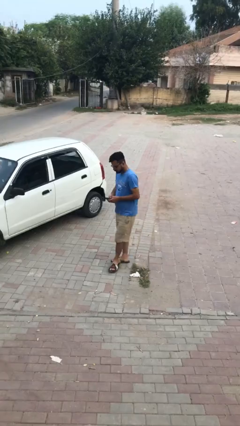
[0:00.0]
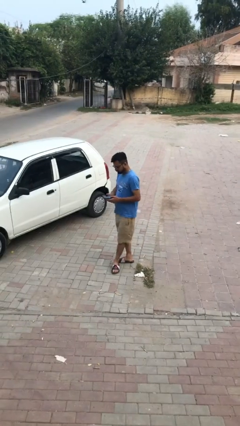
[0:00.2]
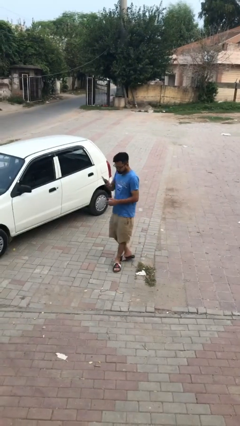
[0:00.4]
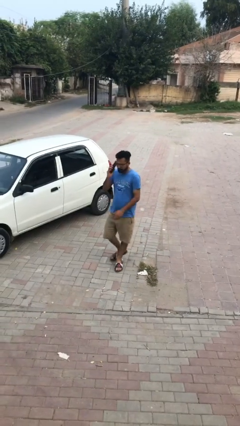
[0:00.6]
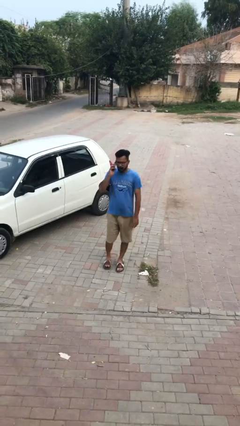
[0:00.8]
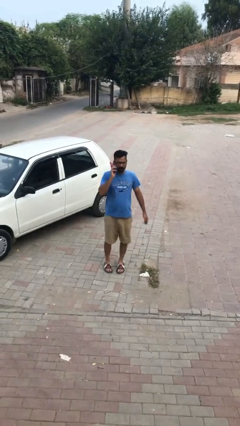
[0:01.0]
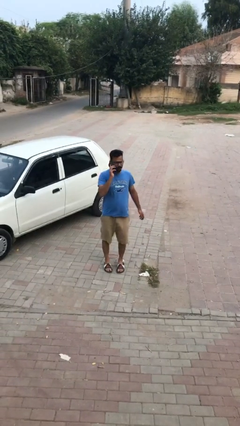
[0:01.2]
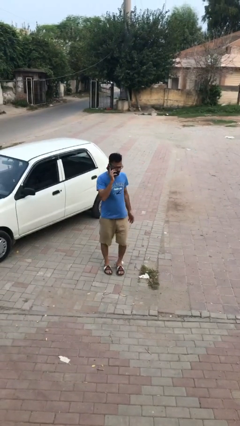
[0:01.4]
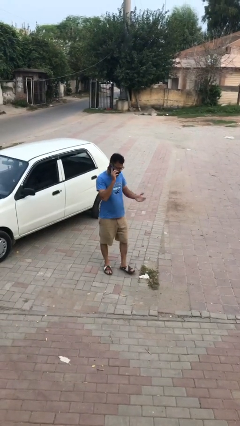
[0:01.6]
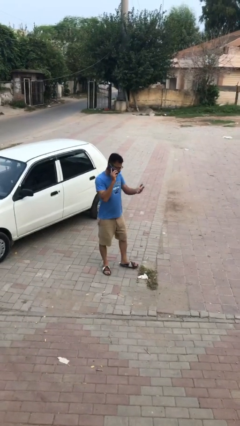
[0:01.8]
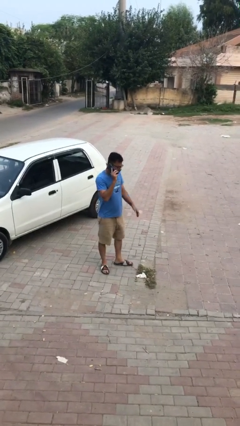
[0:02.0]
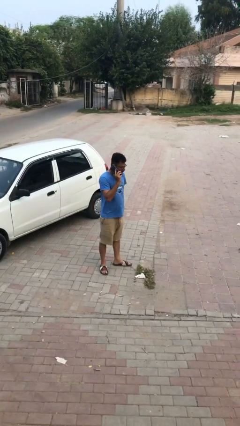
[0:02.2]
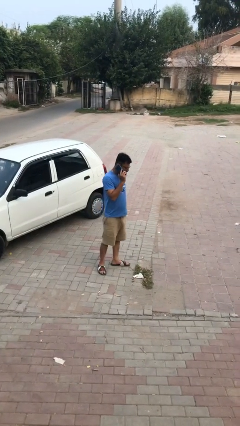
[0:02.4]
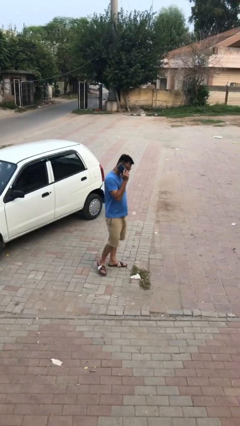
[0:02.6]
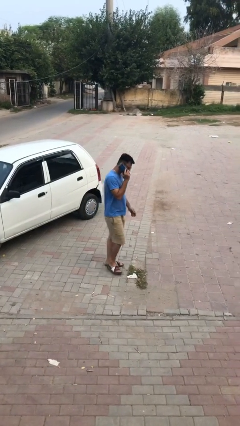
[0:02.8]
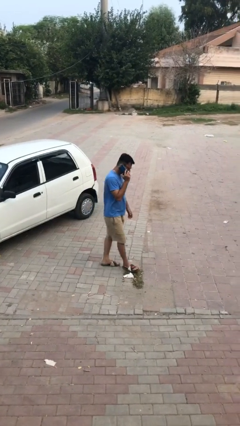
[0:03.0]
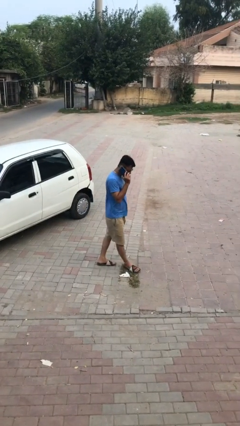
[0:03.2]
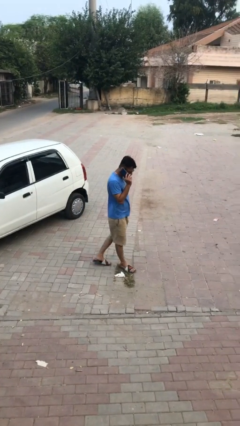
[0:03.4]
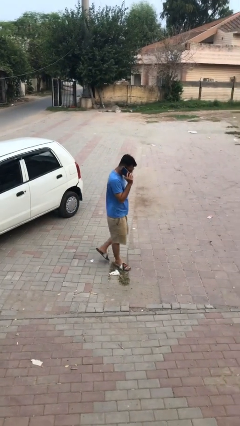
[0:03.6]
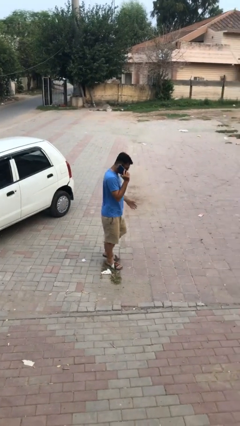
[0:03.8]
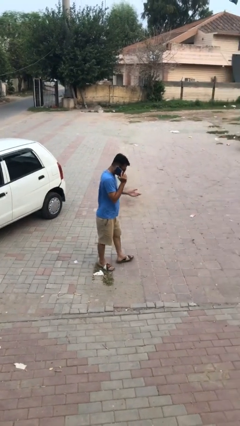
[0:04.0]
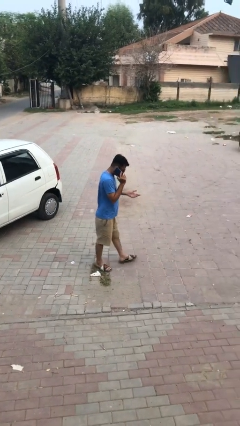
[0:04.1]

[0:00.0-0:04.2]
person talks on phone

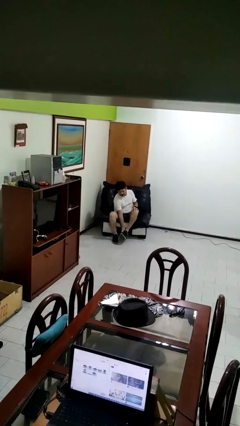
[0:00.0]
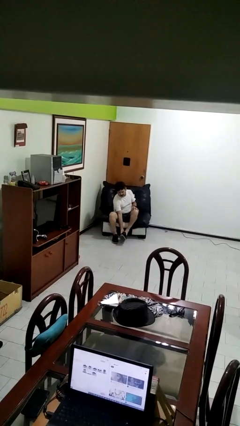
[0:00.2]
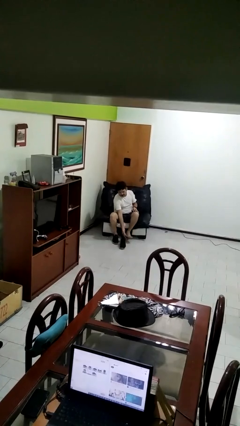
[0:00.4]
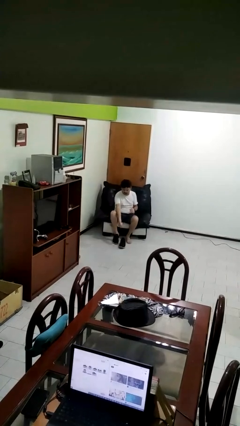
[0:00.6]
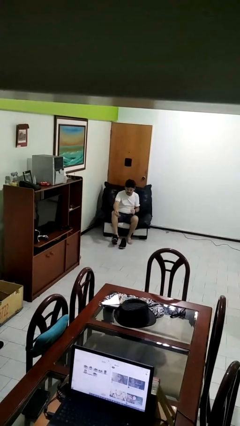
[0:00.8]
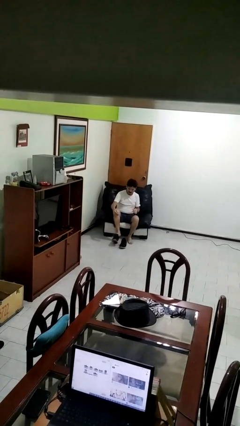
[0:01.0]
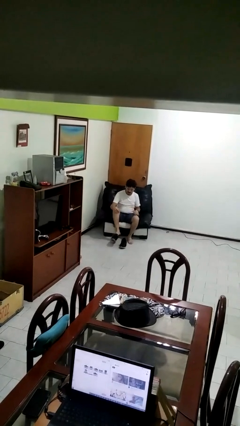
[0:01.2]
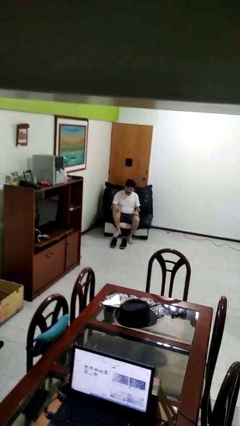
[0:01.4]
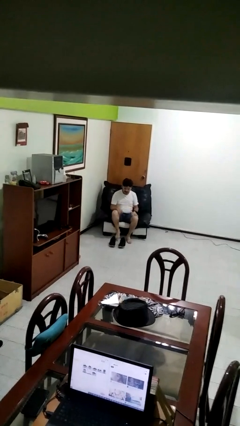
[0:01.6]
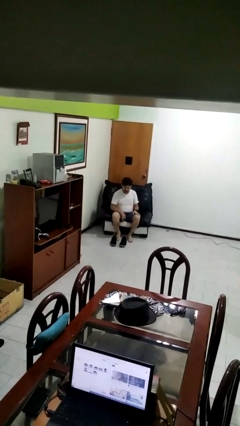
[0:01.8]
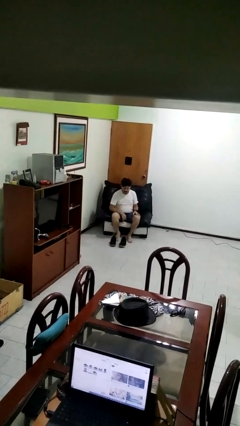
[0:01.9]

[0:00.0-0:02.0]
person takes off shoes

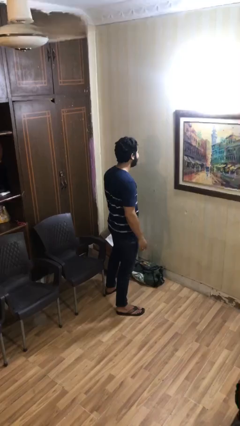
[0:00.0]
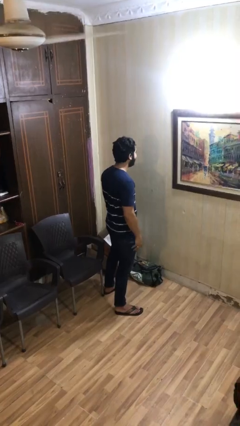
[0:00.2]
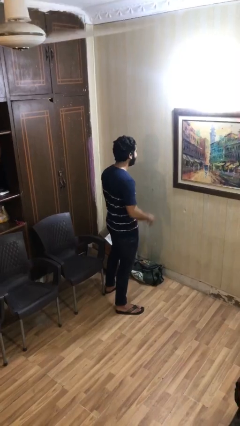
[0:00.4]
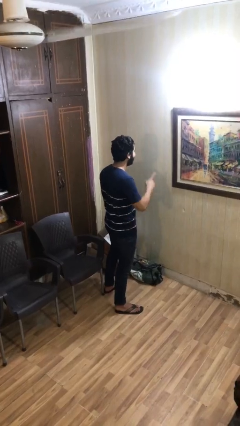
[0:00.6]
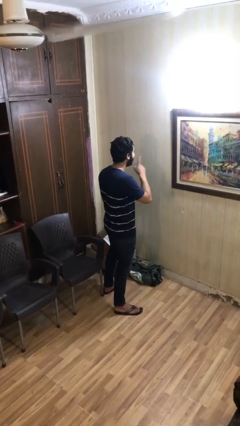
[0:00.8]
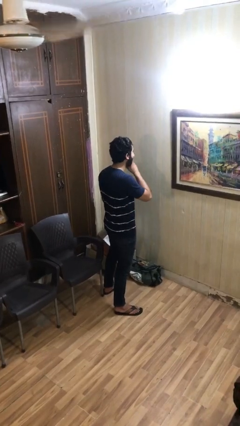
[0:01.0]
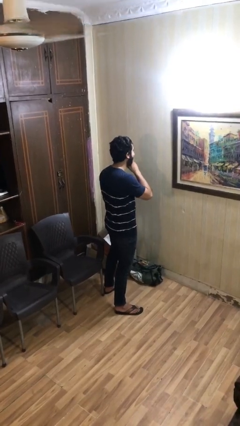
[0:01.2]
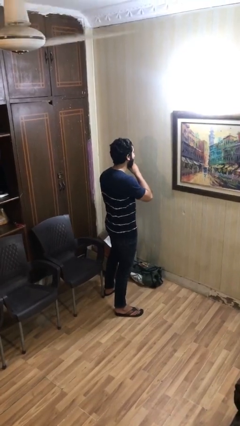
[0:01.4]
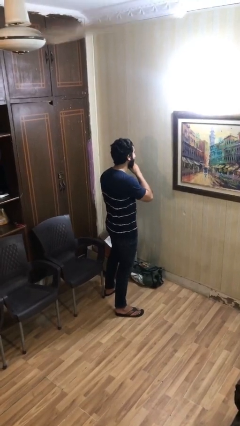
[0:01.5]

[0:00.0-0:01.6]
person gestures be quiet

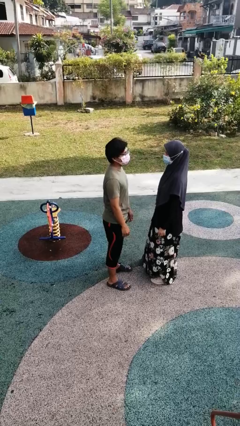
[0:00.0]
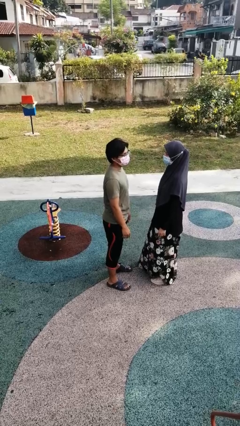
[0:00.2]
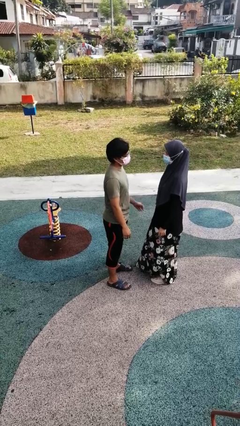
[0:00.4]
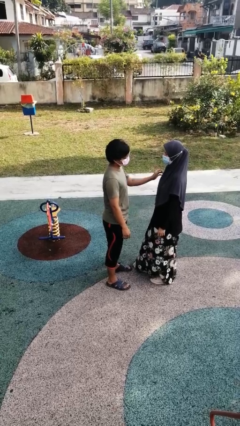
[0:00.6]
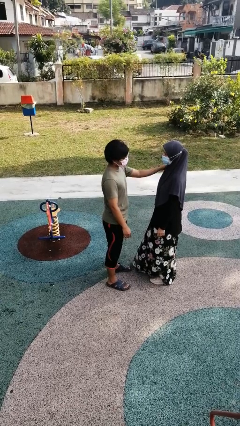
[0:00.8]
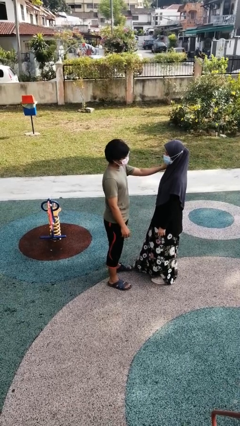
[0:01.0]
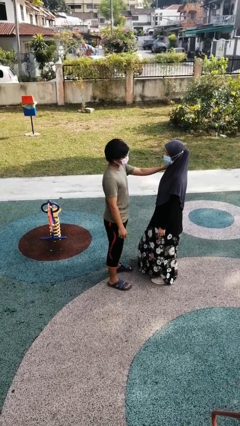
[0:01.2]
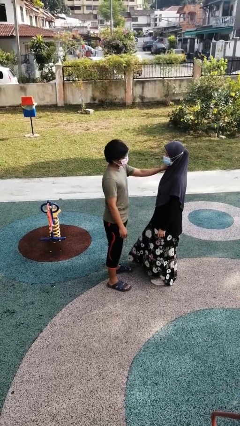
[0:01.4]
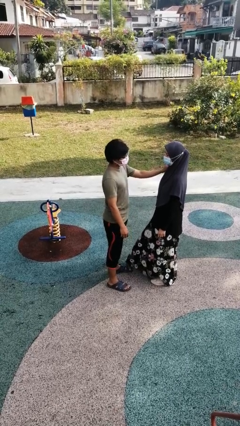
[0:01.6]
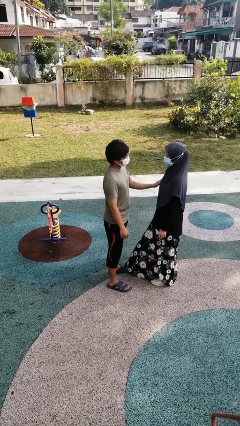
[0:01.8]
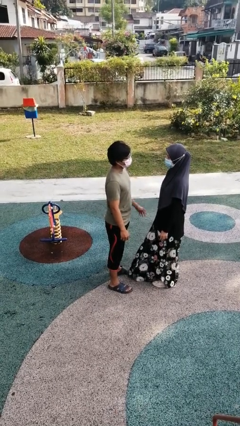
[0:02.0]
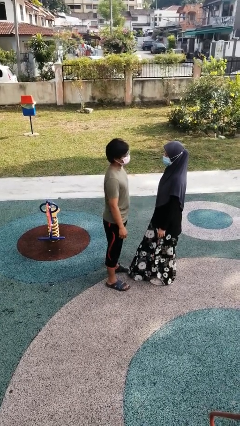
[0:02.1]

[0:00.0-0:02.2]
person pounds shoulders of person

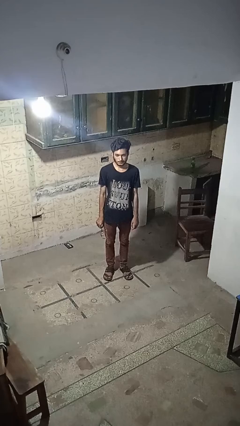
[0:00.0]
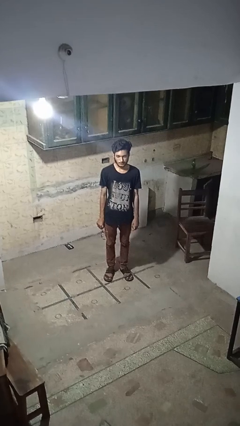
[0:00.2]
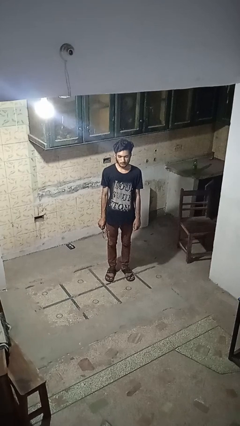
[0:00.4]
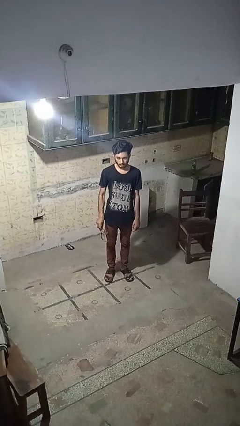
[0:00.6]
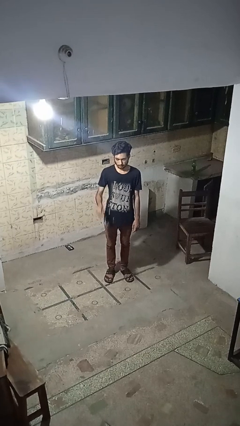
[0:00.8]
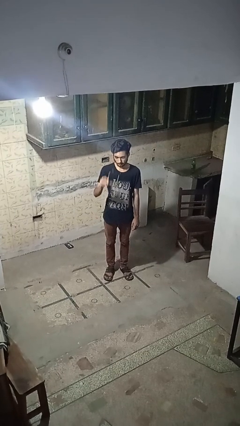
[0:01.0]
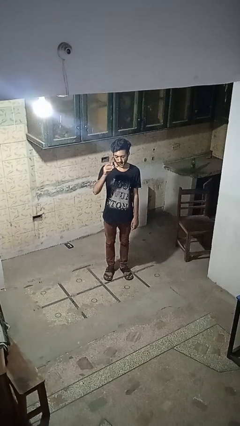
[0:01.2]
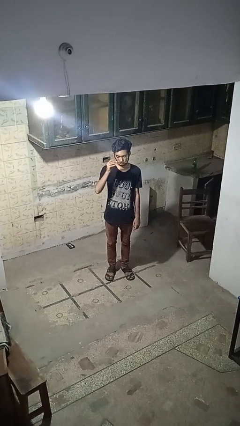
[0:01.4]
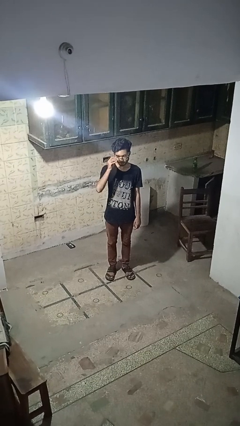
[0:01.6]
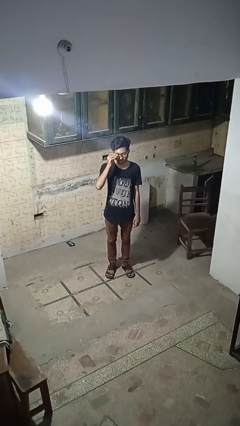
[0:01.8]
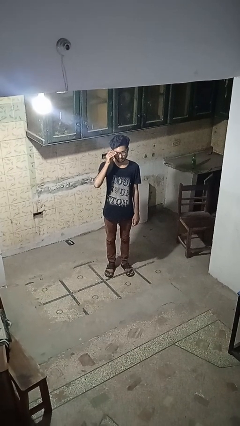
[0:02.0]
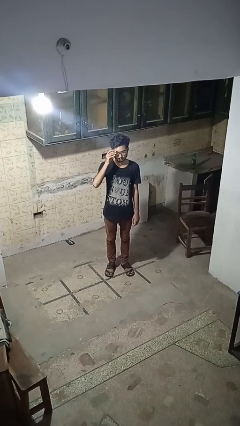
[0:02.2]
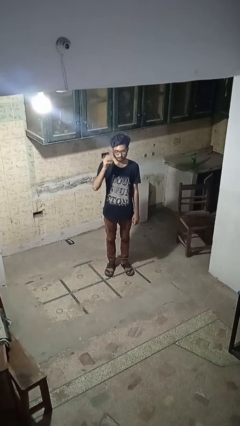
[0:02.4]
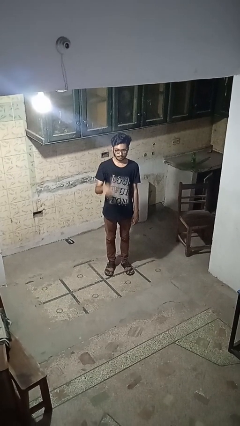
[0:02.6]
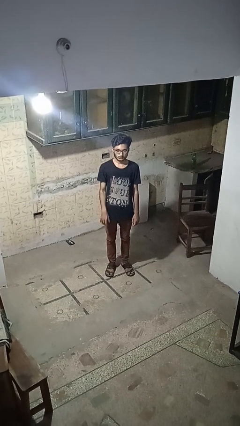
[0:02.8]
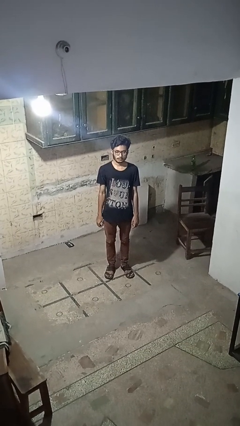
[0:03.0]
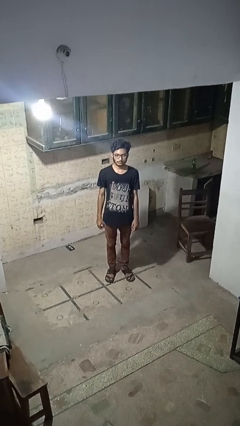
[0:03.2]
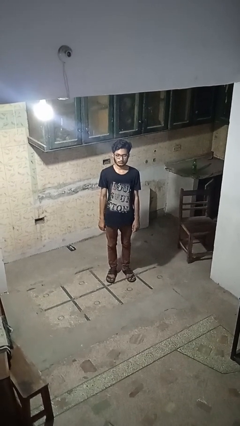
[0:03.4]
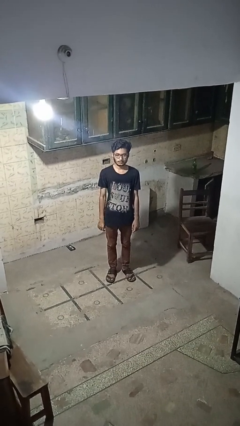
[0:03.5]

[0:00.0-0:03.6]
person puts on glasses

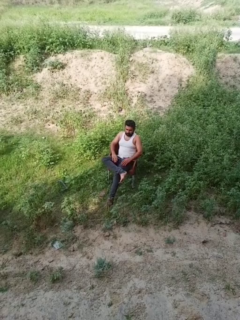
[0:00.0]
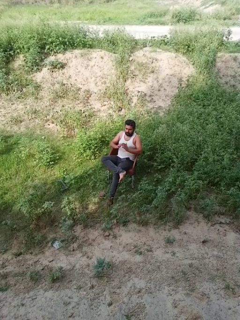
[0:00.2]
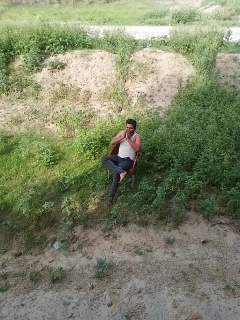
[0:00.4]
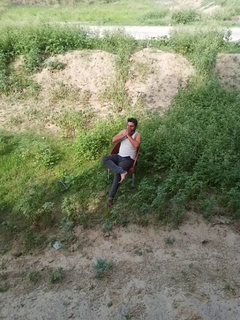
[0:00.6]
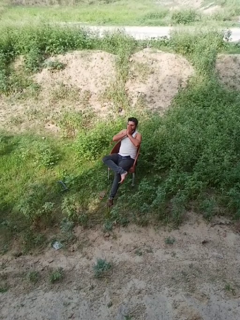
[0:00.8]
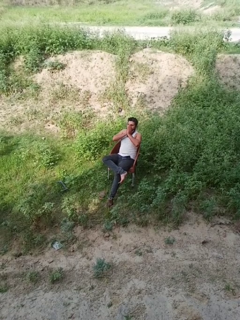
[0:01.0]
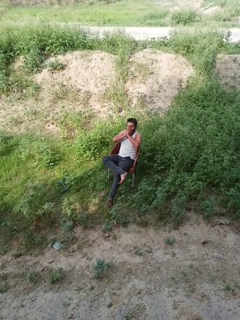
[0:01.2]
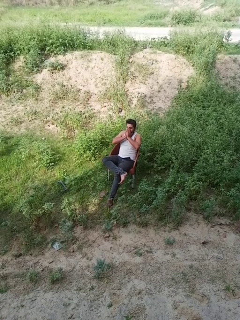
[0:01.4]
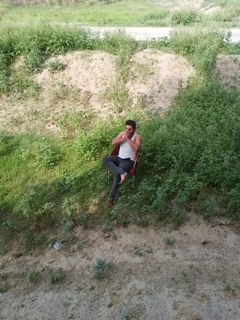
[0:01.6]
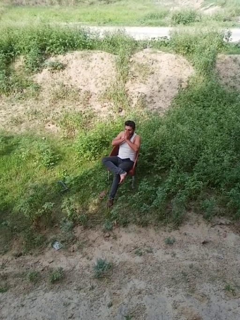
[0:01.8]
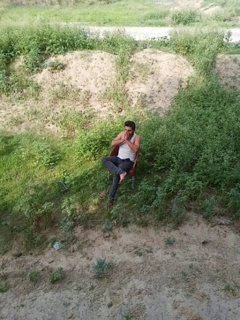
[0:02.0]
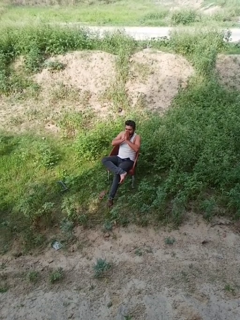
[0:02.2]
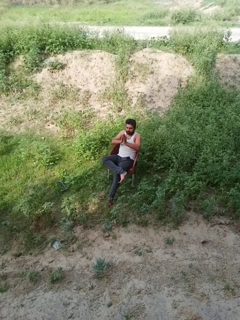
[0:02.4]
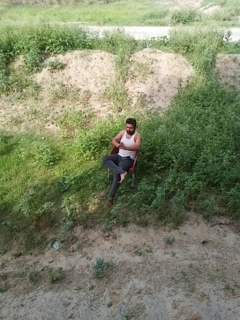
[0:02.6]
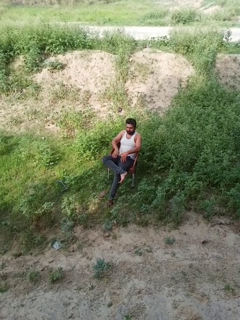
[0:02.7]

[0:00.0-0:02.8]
person sneezes into hand

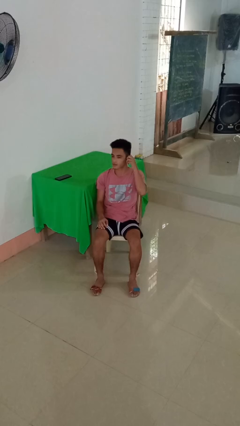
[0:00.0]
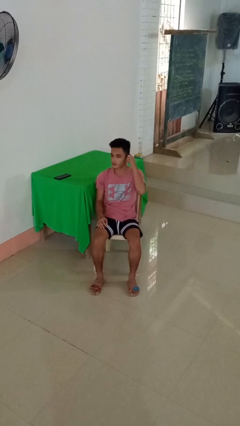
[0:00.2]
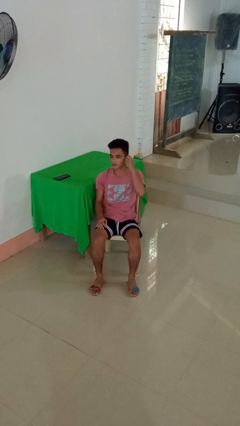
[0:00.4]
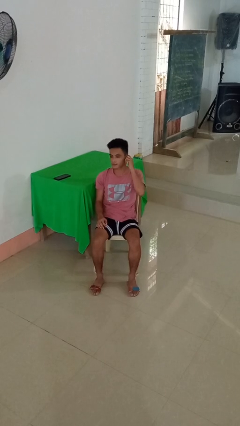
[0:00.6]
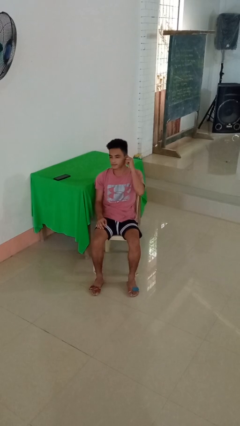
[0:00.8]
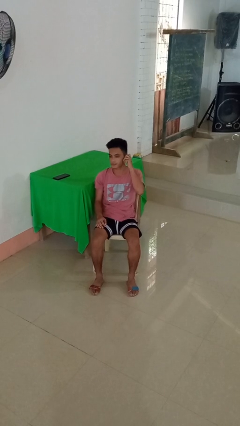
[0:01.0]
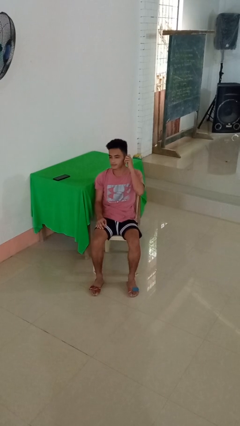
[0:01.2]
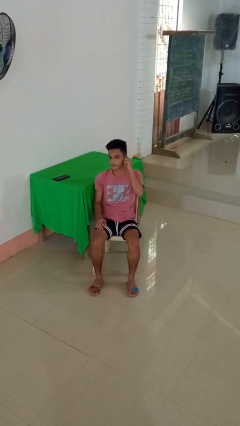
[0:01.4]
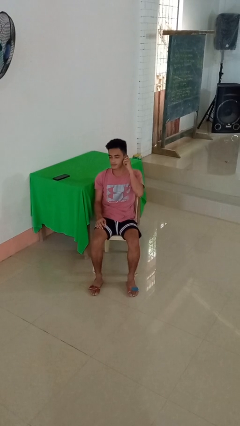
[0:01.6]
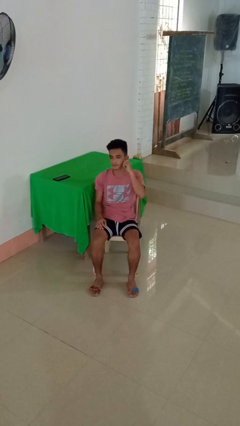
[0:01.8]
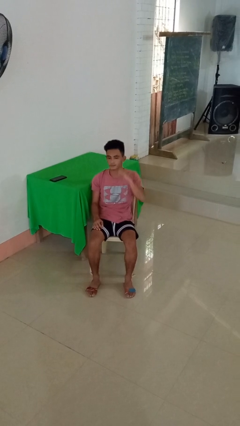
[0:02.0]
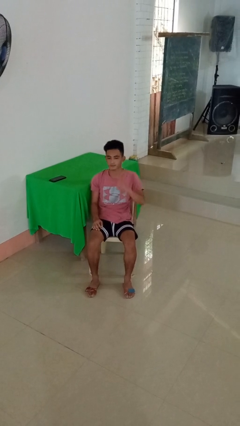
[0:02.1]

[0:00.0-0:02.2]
person touches earlobe
